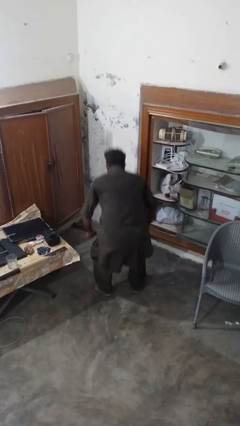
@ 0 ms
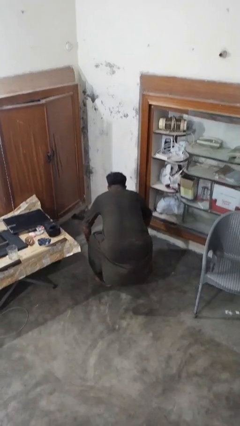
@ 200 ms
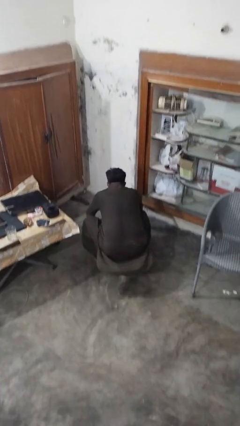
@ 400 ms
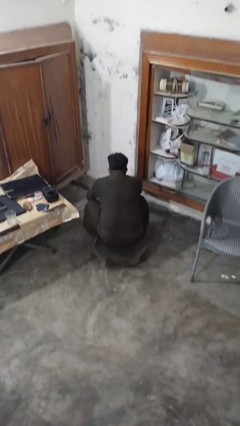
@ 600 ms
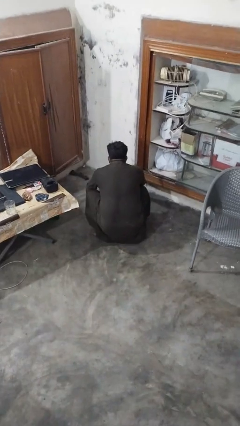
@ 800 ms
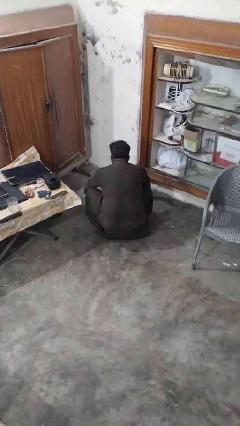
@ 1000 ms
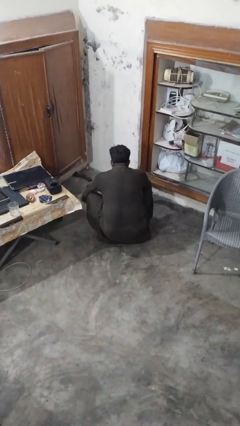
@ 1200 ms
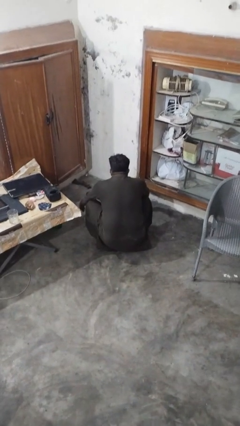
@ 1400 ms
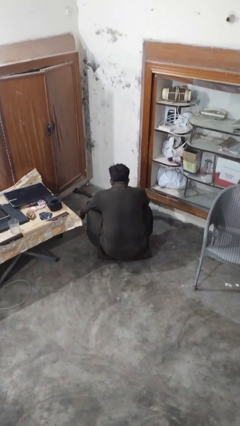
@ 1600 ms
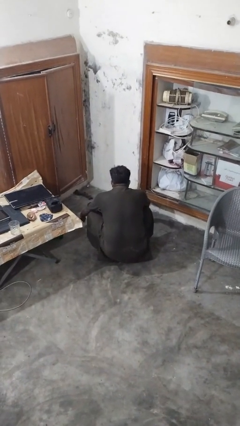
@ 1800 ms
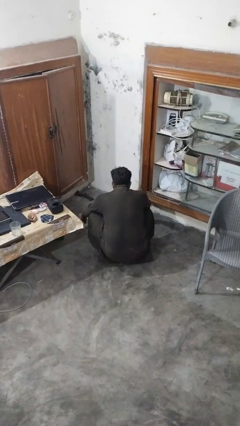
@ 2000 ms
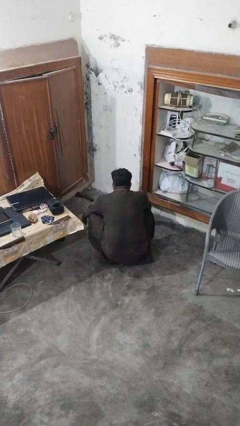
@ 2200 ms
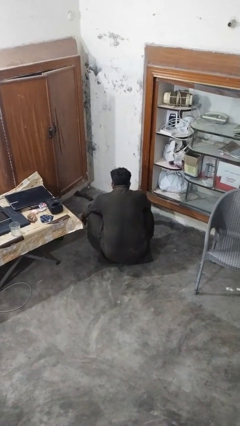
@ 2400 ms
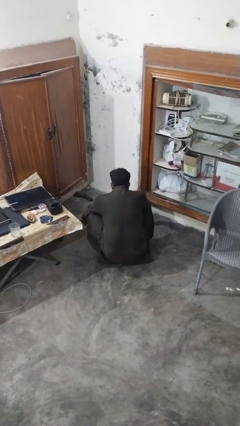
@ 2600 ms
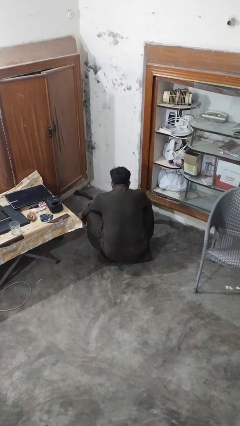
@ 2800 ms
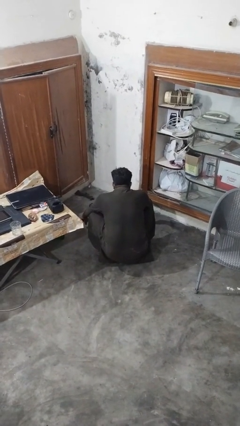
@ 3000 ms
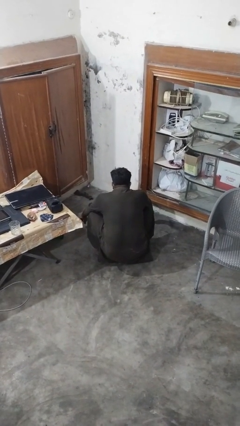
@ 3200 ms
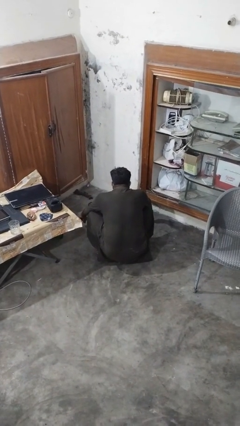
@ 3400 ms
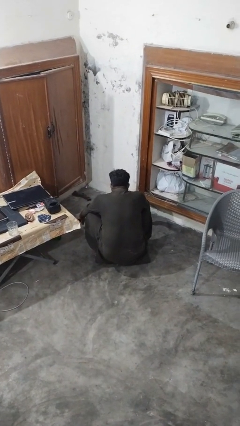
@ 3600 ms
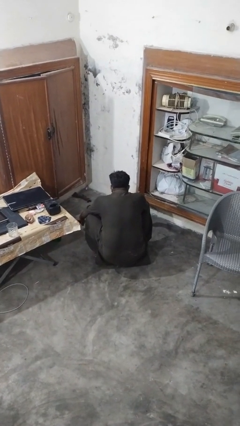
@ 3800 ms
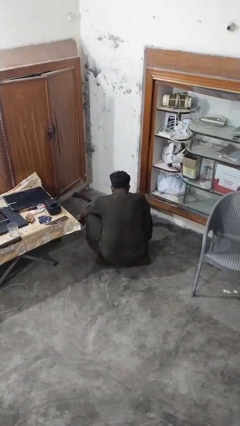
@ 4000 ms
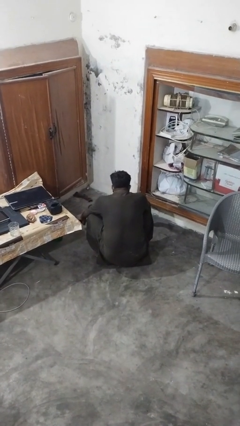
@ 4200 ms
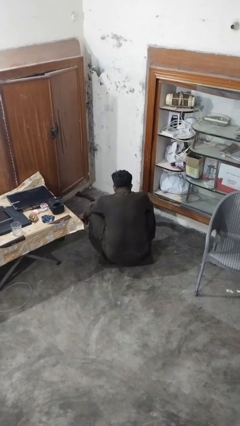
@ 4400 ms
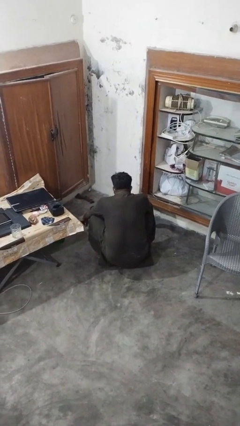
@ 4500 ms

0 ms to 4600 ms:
person squats

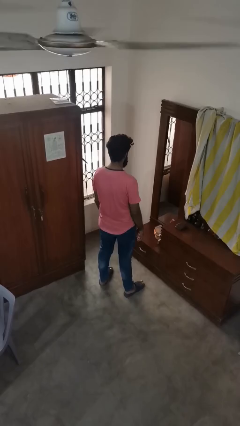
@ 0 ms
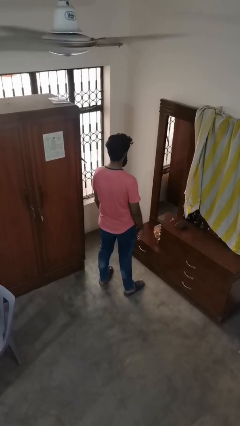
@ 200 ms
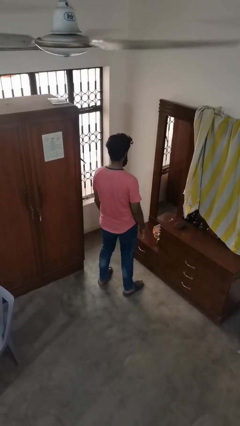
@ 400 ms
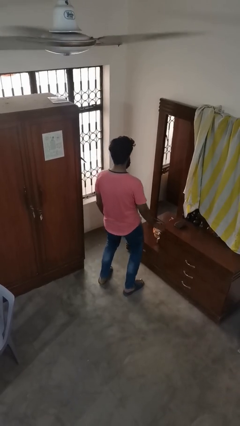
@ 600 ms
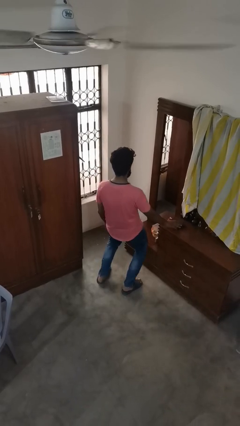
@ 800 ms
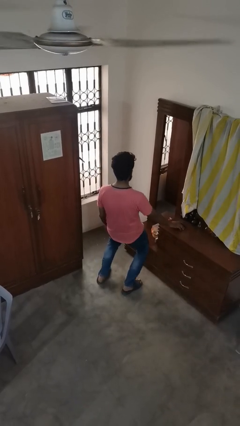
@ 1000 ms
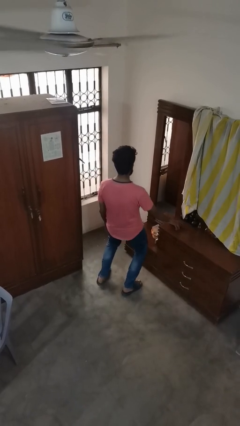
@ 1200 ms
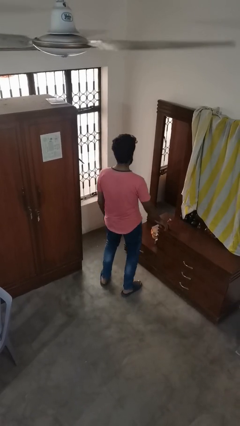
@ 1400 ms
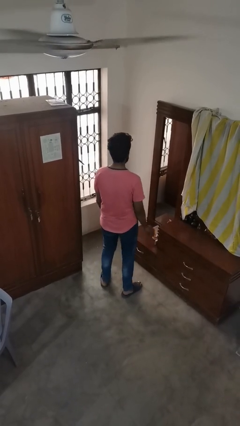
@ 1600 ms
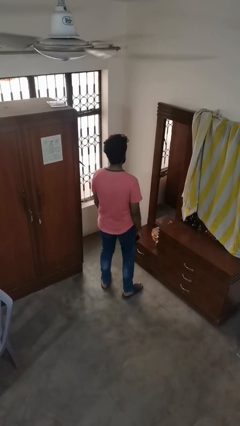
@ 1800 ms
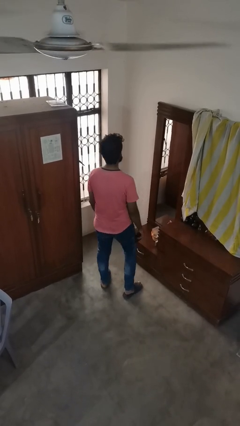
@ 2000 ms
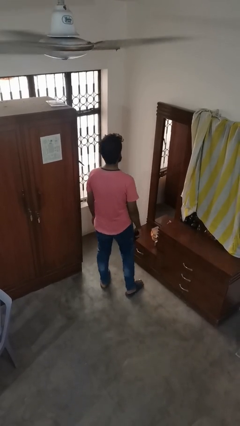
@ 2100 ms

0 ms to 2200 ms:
person picks up object from floor

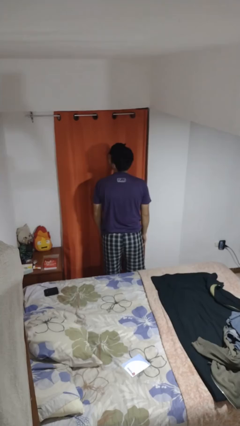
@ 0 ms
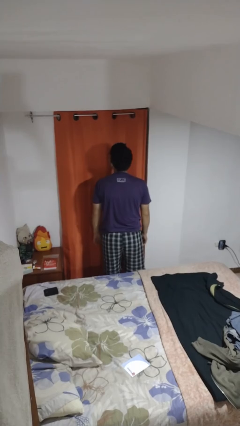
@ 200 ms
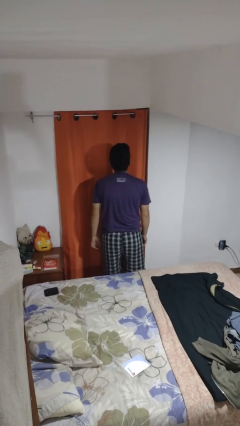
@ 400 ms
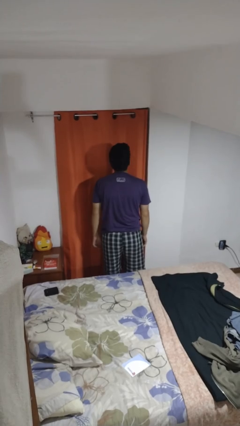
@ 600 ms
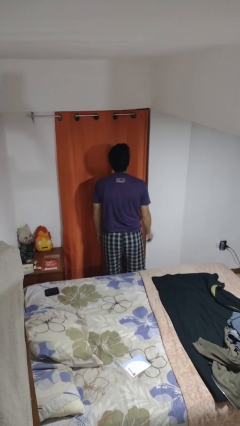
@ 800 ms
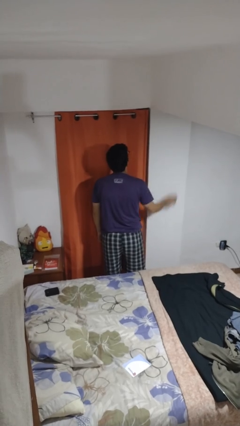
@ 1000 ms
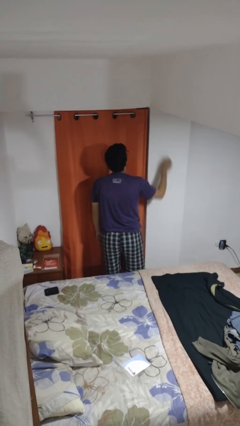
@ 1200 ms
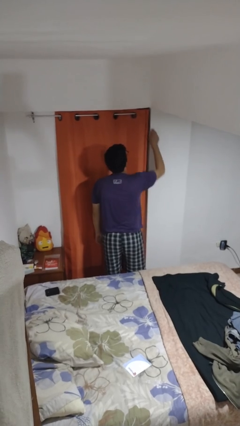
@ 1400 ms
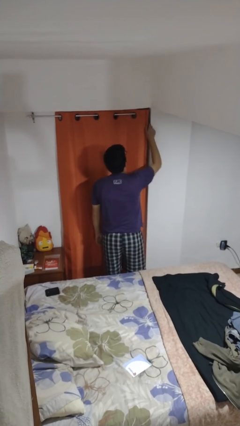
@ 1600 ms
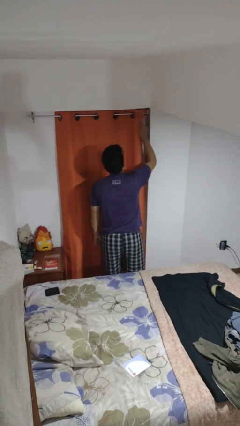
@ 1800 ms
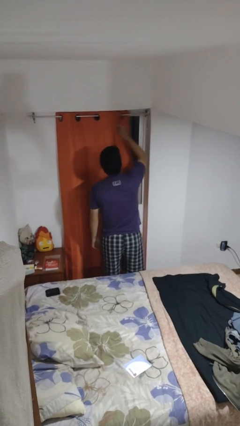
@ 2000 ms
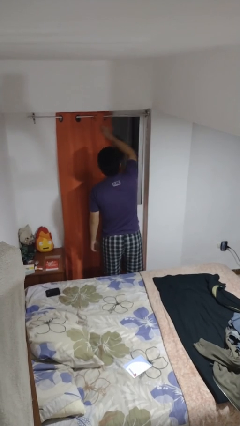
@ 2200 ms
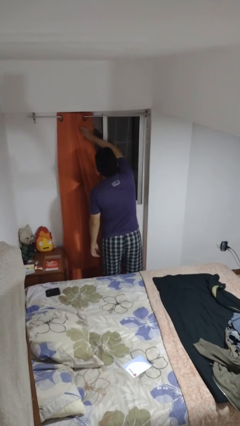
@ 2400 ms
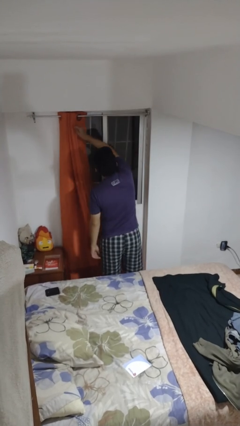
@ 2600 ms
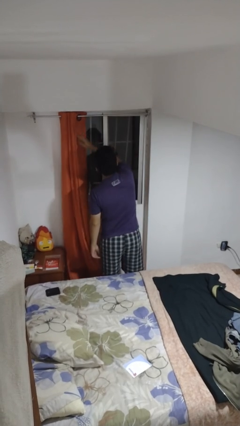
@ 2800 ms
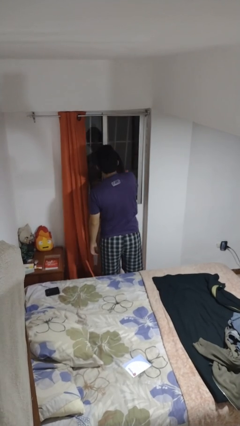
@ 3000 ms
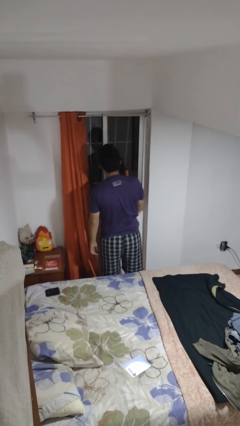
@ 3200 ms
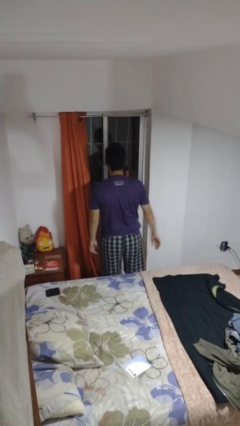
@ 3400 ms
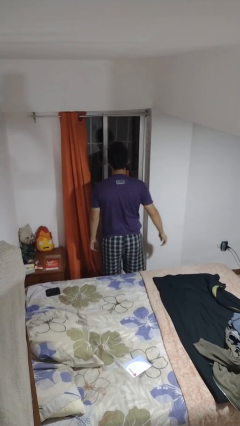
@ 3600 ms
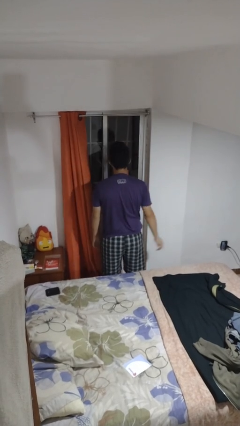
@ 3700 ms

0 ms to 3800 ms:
person opens curtains

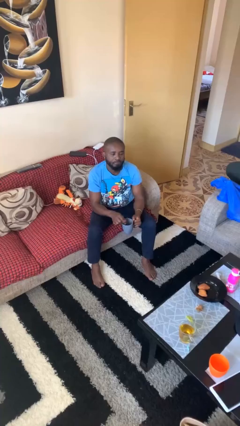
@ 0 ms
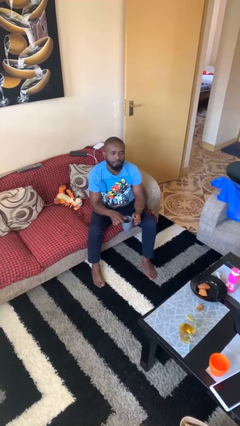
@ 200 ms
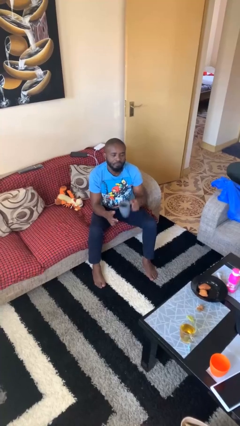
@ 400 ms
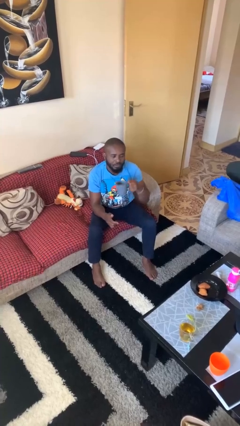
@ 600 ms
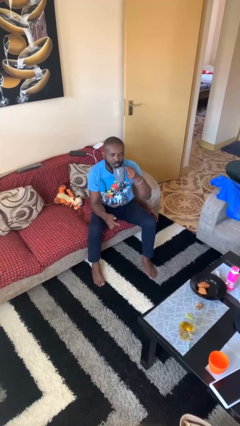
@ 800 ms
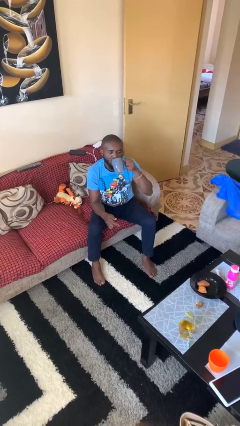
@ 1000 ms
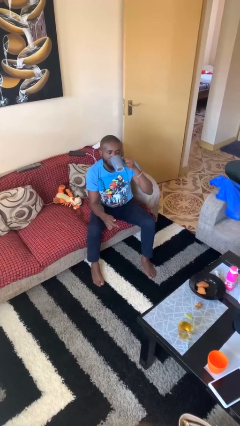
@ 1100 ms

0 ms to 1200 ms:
person drinks from mug

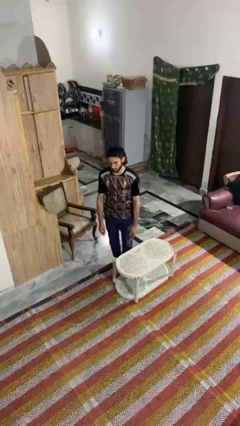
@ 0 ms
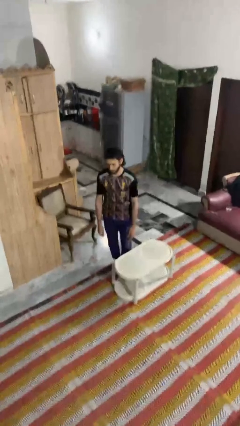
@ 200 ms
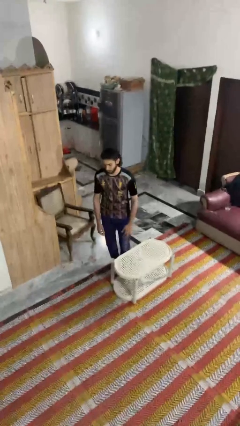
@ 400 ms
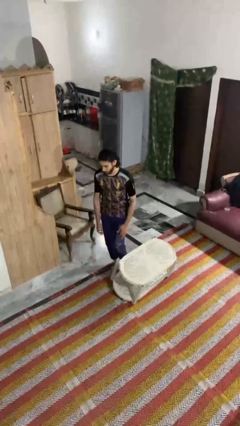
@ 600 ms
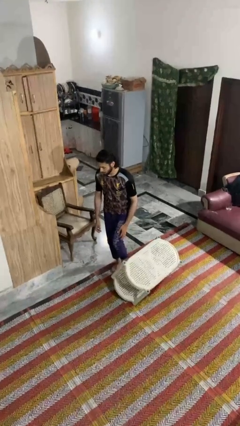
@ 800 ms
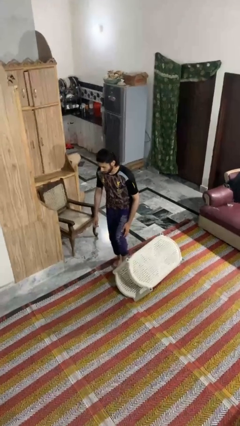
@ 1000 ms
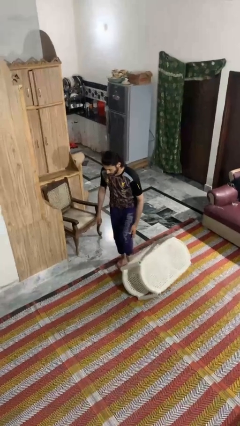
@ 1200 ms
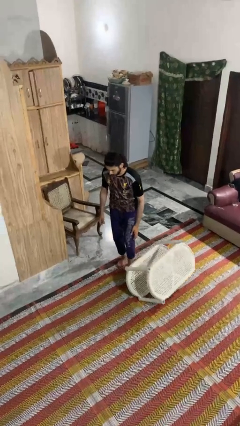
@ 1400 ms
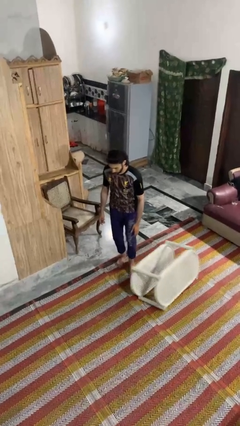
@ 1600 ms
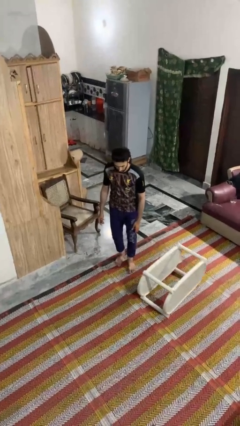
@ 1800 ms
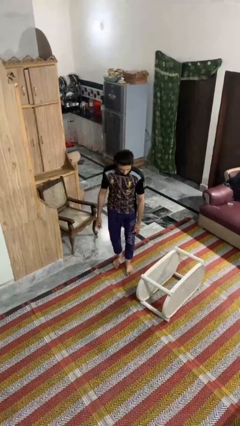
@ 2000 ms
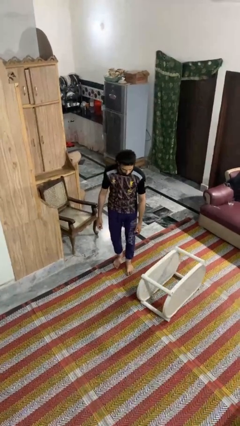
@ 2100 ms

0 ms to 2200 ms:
person knocks over furniture

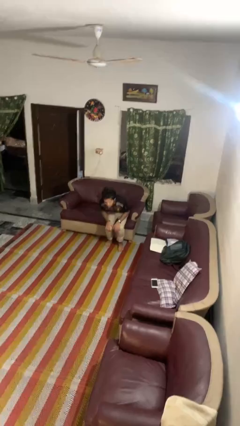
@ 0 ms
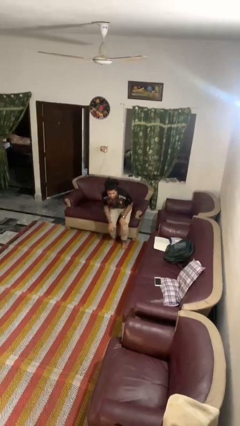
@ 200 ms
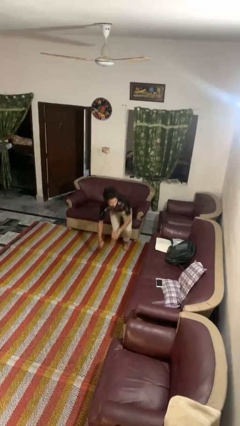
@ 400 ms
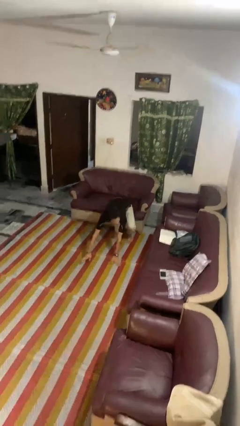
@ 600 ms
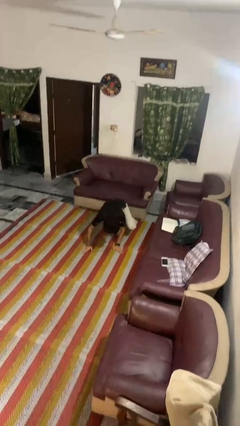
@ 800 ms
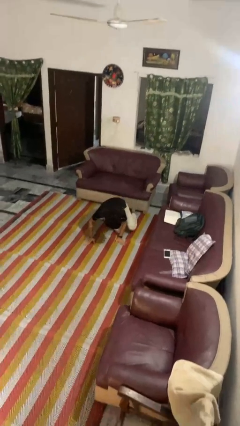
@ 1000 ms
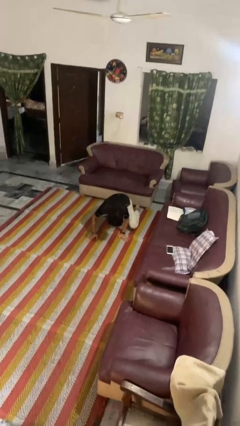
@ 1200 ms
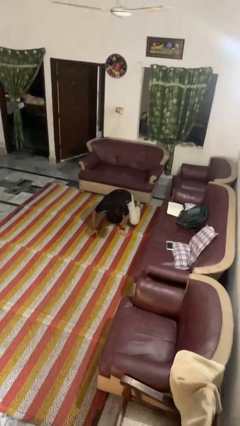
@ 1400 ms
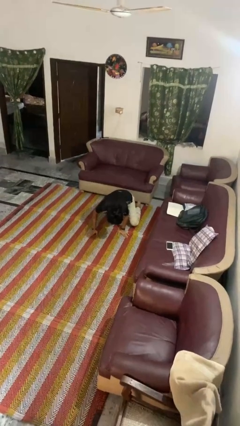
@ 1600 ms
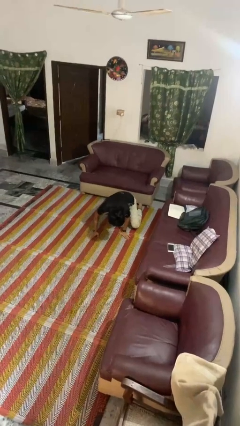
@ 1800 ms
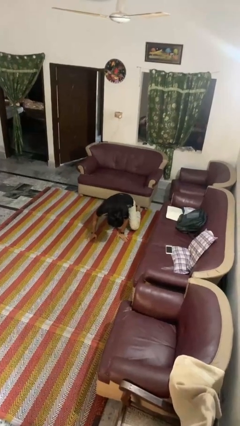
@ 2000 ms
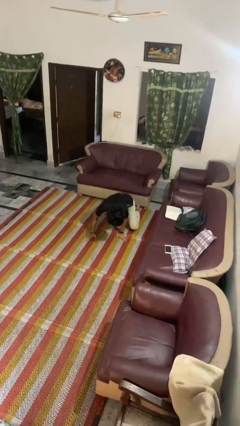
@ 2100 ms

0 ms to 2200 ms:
person falls from chair

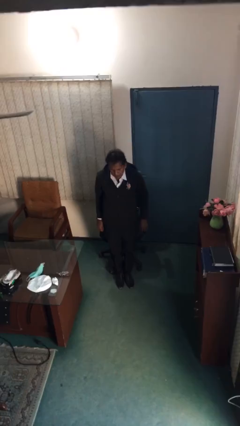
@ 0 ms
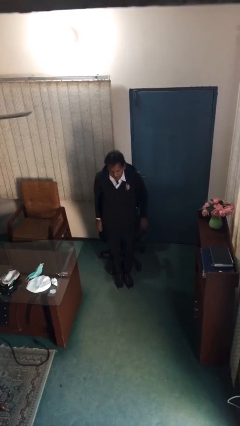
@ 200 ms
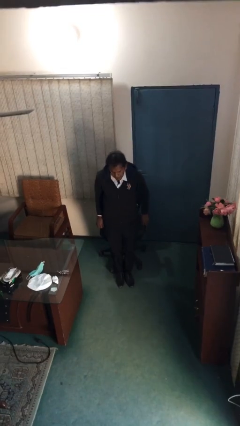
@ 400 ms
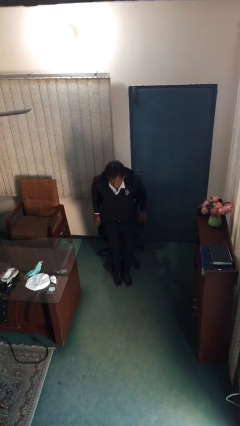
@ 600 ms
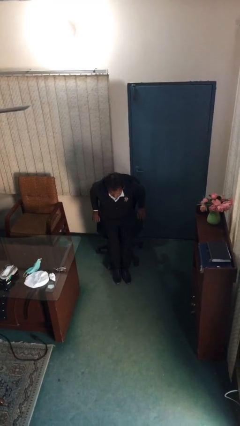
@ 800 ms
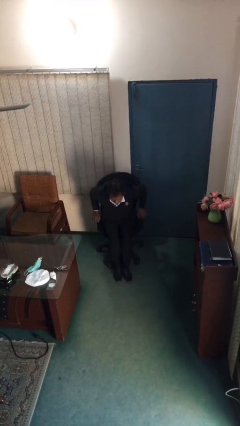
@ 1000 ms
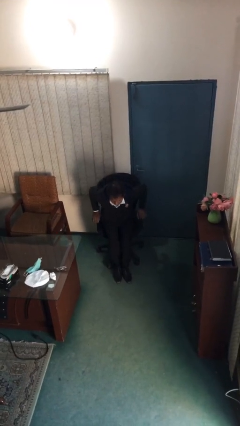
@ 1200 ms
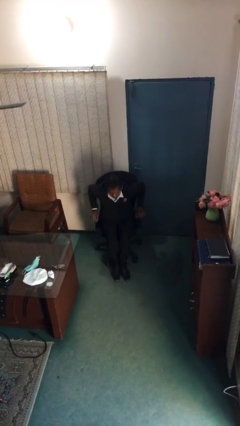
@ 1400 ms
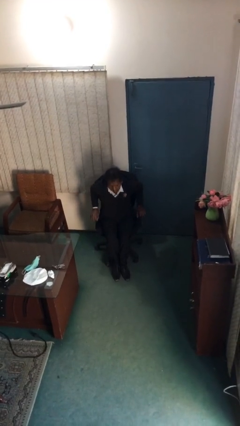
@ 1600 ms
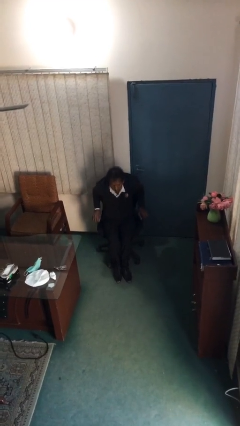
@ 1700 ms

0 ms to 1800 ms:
person sits down
